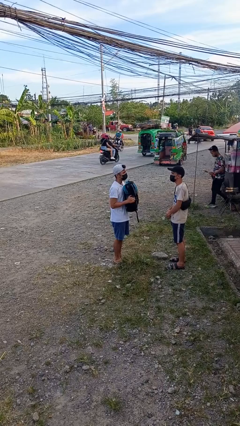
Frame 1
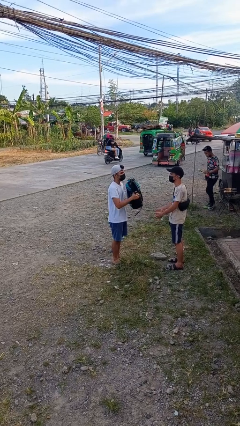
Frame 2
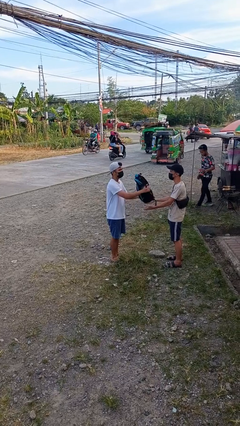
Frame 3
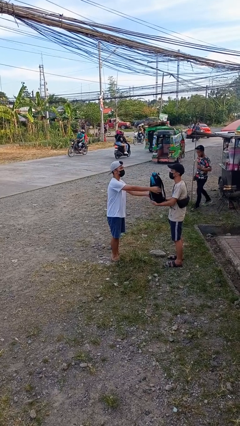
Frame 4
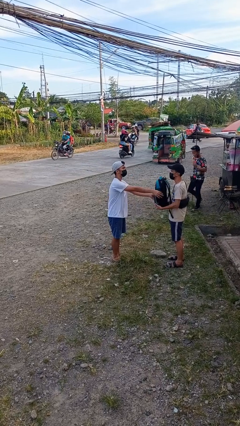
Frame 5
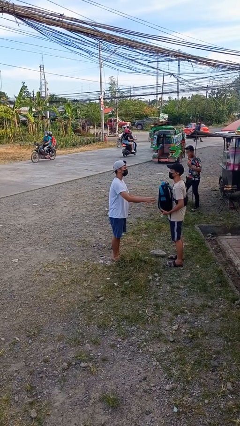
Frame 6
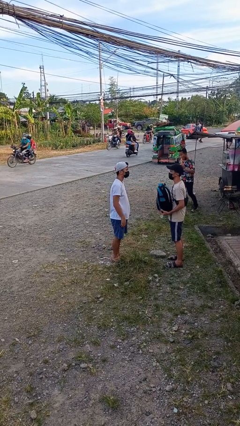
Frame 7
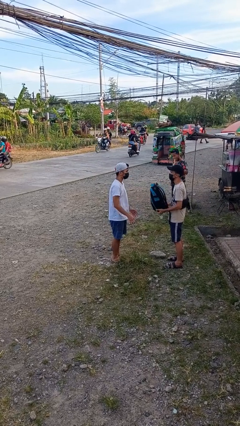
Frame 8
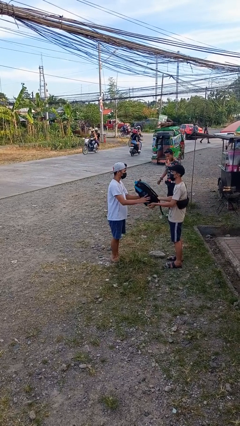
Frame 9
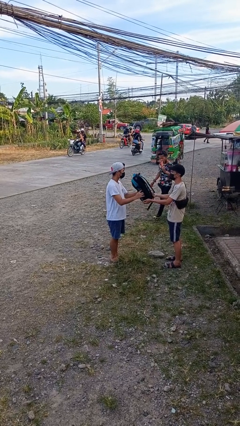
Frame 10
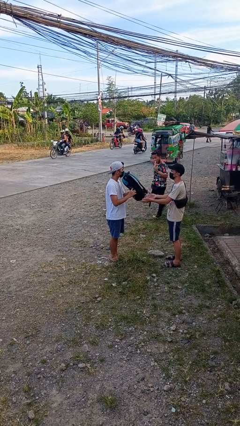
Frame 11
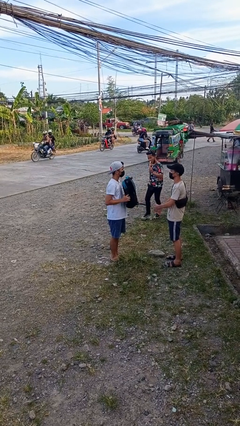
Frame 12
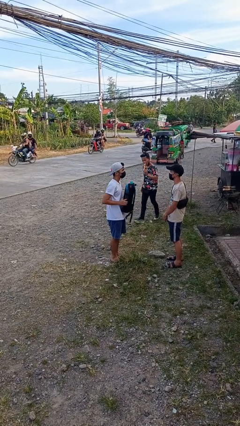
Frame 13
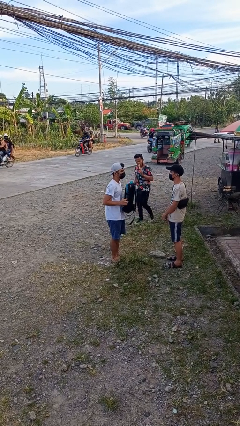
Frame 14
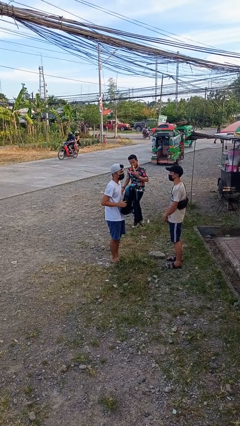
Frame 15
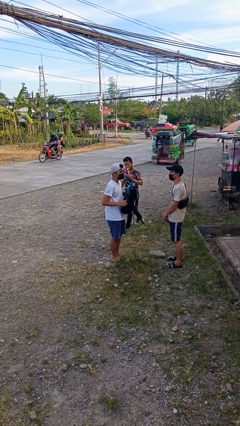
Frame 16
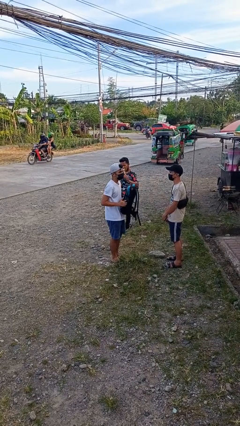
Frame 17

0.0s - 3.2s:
person transfers object to person

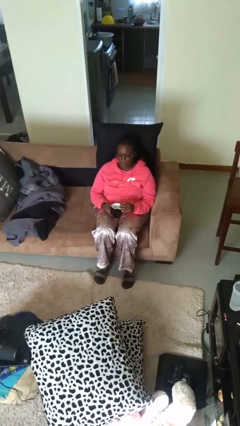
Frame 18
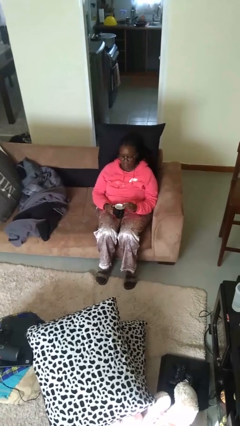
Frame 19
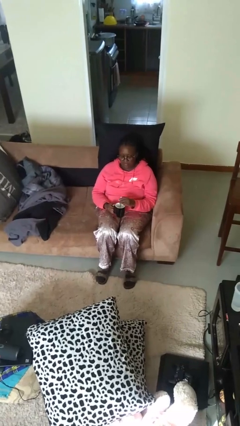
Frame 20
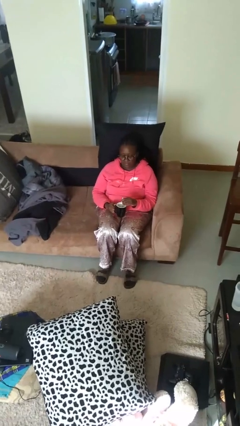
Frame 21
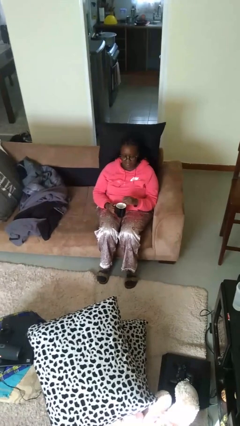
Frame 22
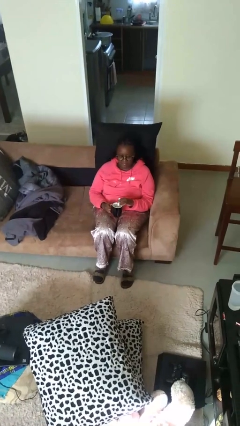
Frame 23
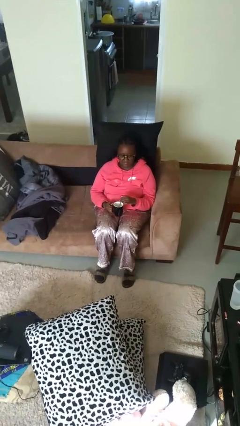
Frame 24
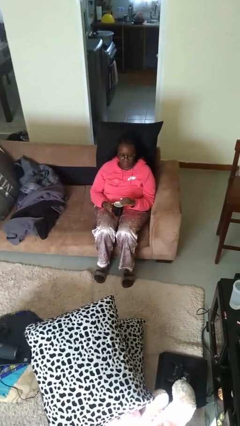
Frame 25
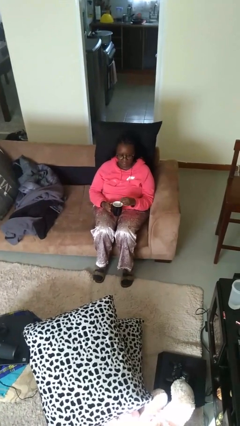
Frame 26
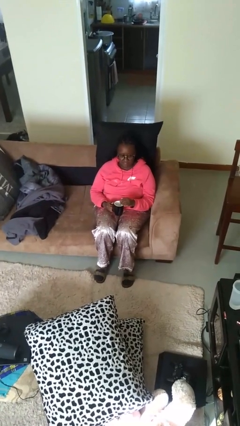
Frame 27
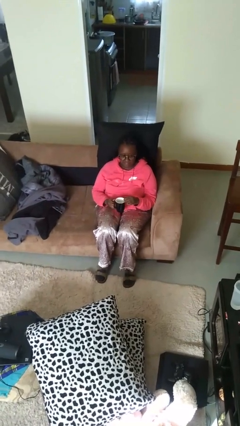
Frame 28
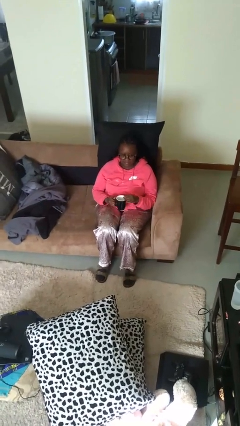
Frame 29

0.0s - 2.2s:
person stirs mug

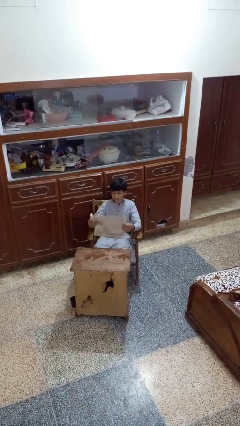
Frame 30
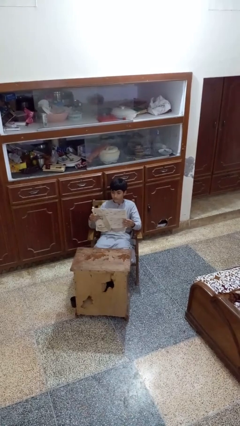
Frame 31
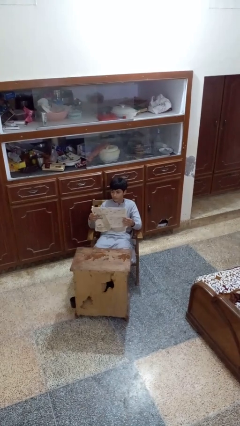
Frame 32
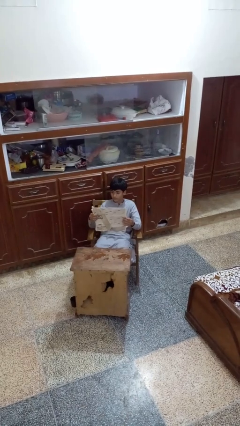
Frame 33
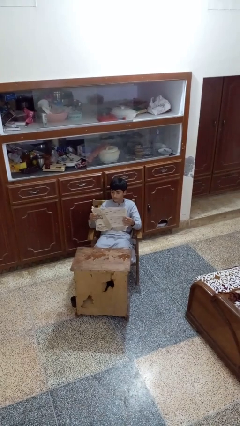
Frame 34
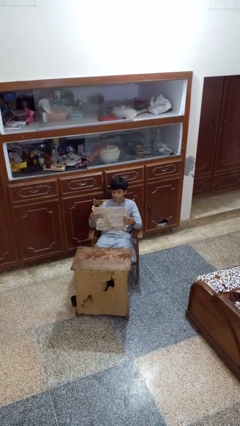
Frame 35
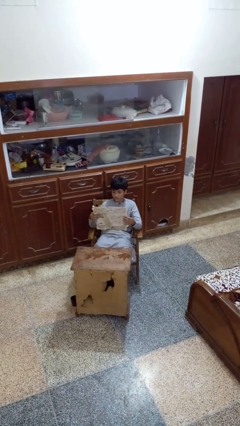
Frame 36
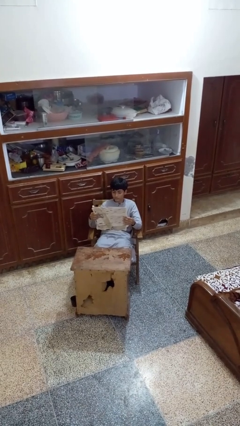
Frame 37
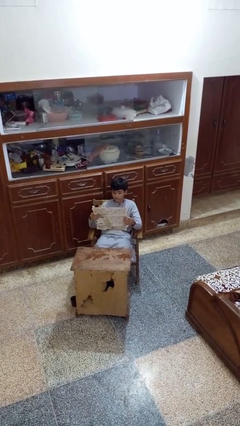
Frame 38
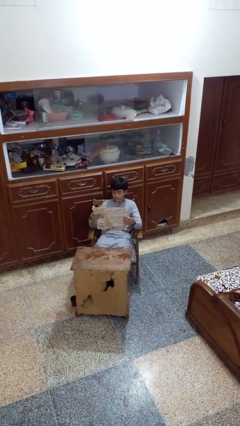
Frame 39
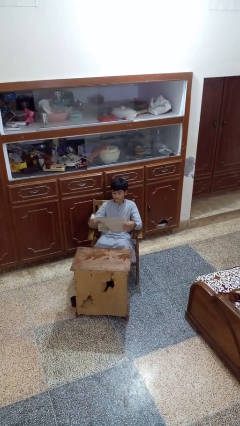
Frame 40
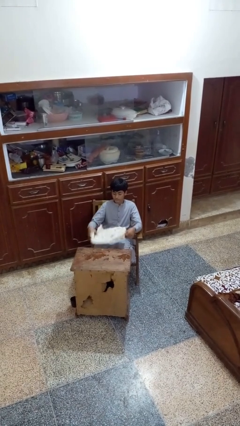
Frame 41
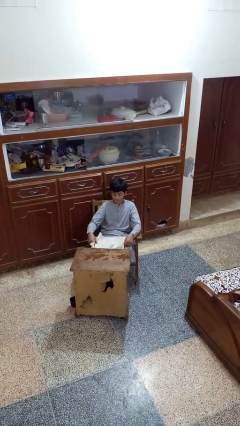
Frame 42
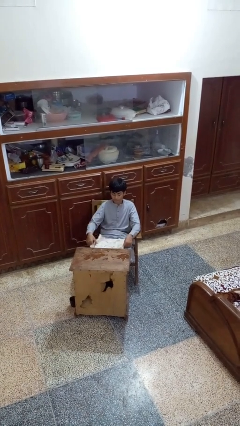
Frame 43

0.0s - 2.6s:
person reads newspaper

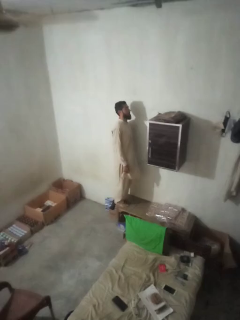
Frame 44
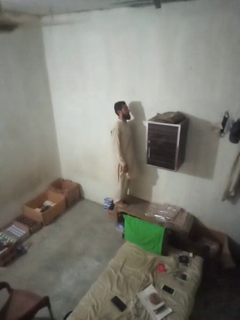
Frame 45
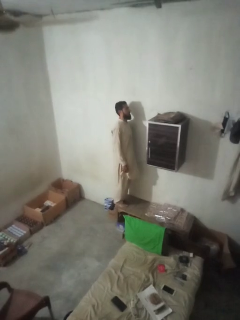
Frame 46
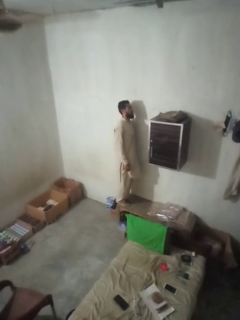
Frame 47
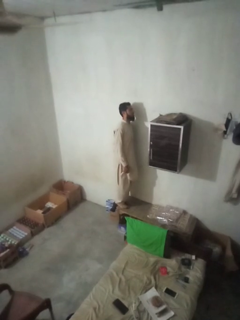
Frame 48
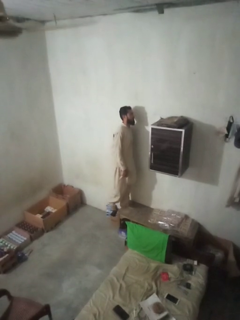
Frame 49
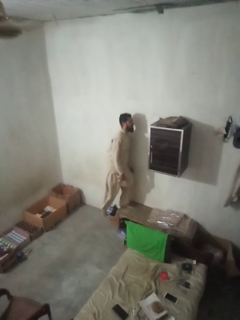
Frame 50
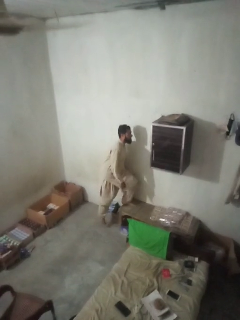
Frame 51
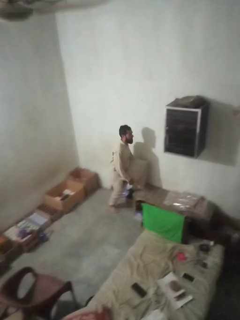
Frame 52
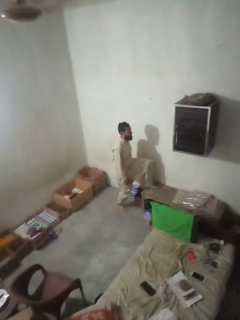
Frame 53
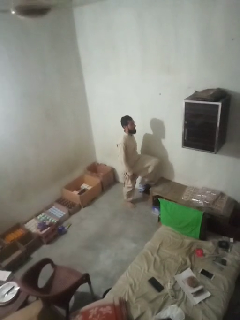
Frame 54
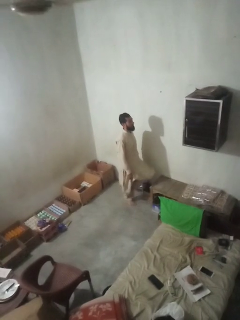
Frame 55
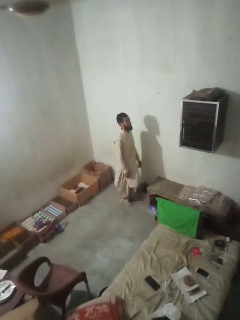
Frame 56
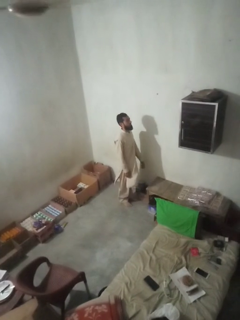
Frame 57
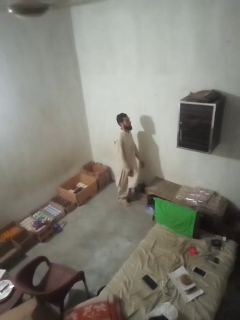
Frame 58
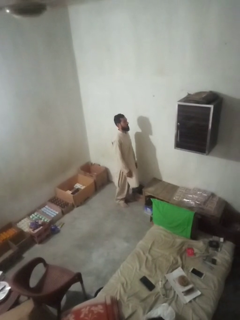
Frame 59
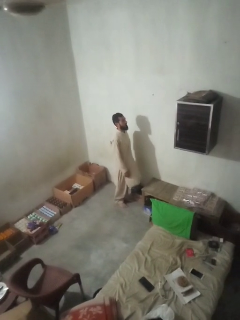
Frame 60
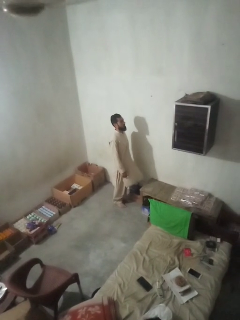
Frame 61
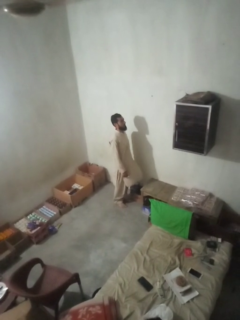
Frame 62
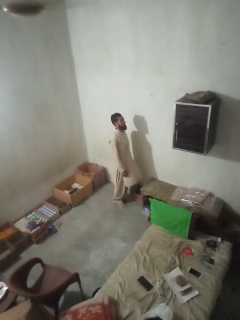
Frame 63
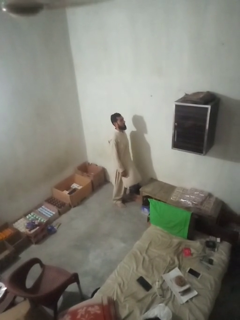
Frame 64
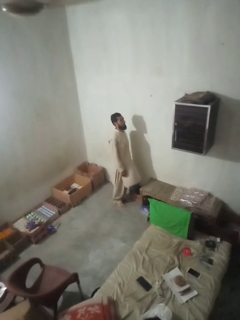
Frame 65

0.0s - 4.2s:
person climbs off table

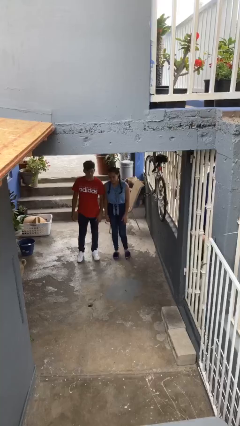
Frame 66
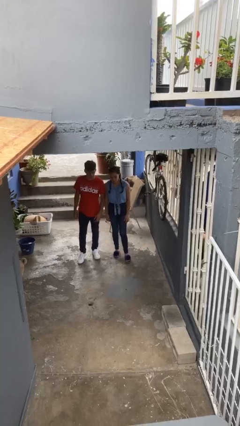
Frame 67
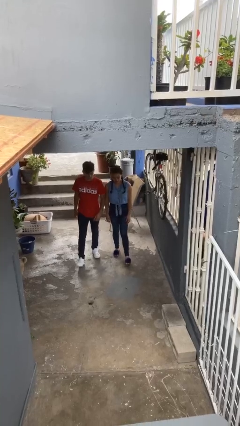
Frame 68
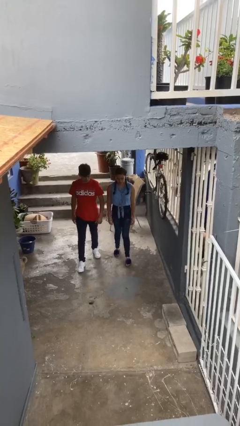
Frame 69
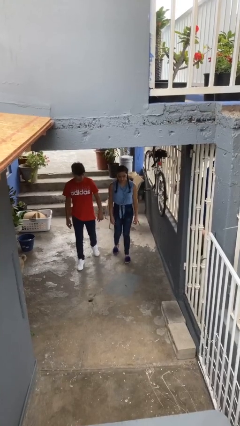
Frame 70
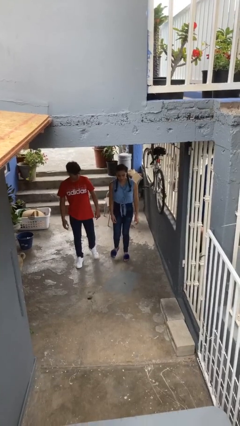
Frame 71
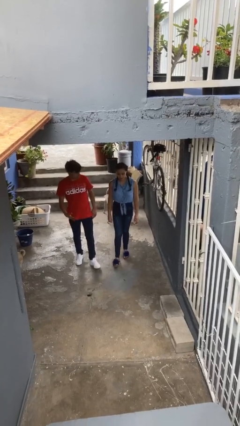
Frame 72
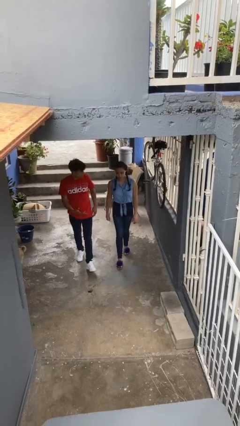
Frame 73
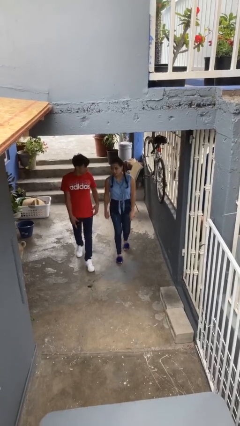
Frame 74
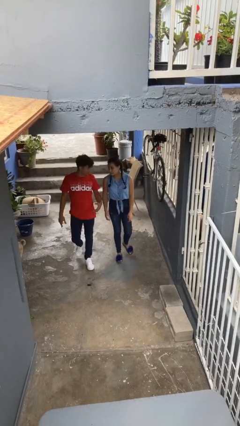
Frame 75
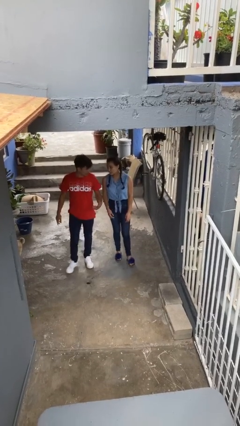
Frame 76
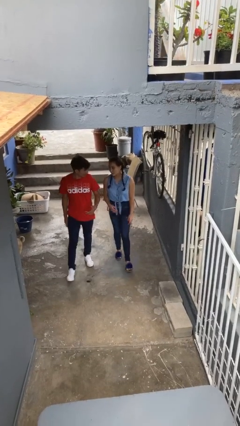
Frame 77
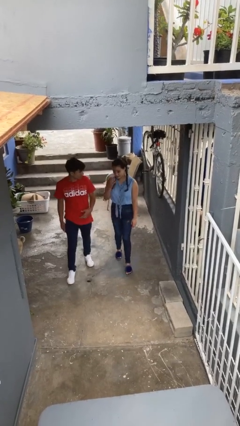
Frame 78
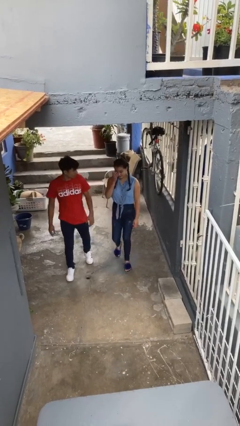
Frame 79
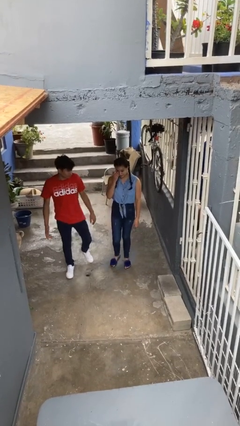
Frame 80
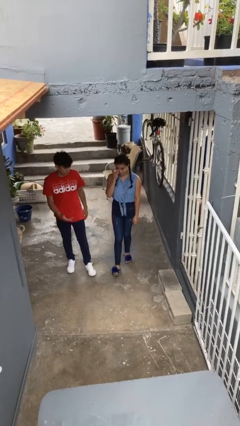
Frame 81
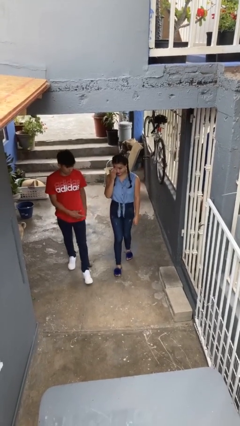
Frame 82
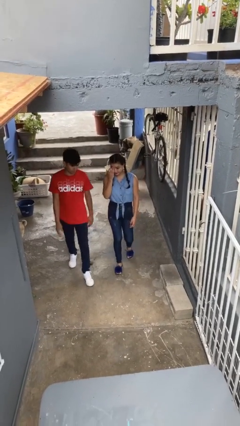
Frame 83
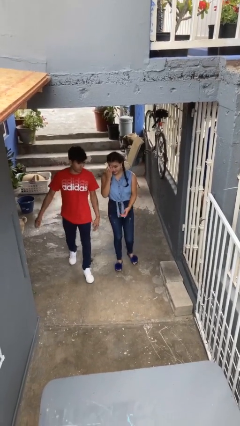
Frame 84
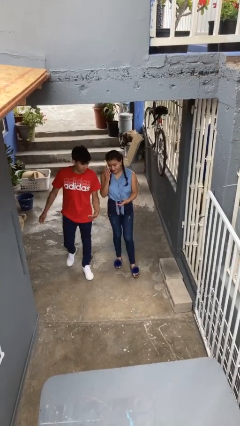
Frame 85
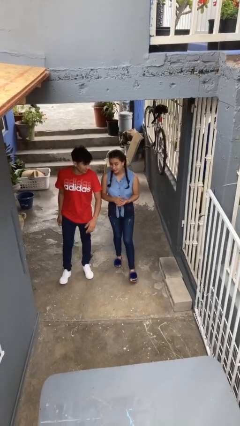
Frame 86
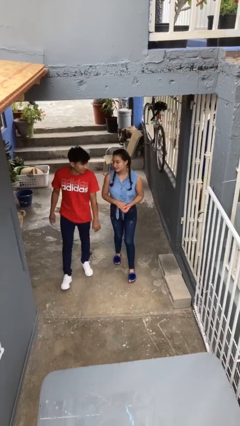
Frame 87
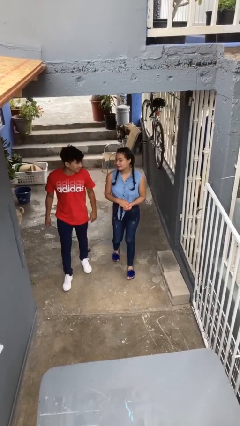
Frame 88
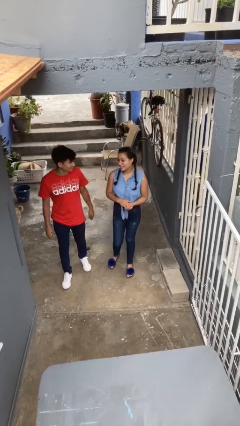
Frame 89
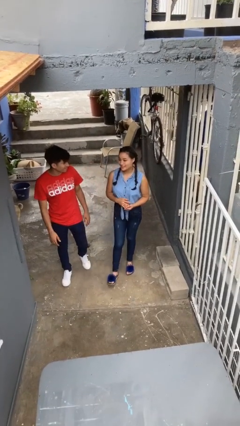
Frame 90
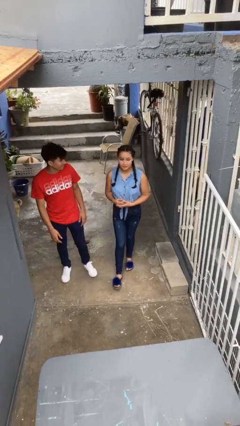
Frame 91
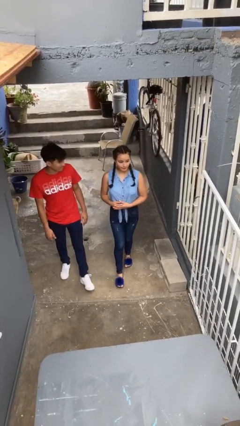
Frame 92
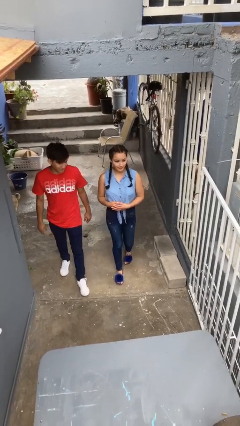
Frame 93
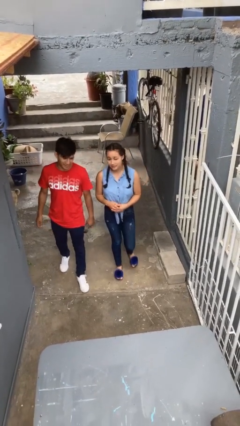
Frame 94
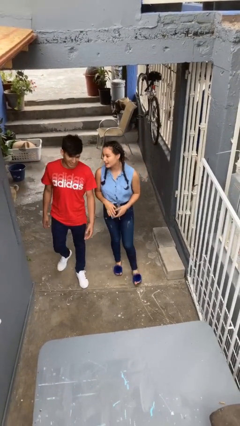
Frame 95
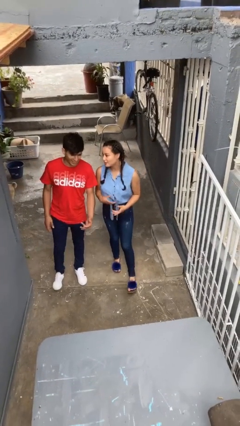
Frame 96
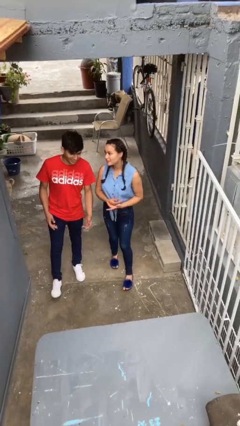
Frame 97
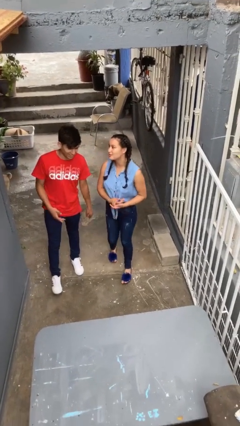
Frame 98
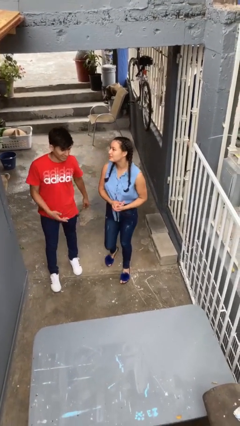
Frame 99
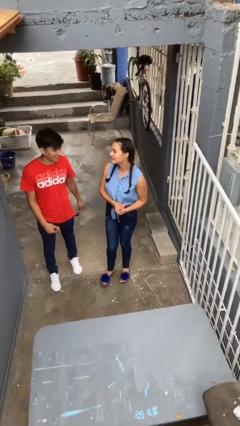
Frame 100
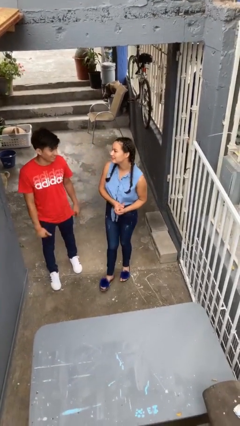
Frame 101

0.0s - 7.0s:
person talks to person
